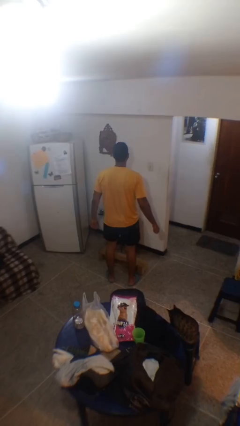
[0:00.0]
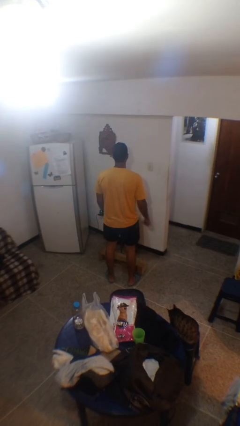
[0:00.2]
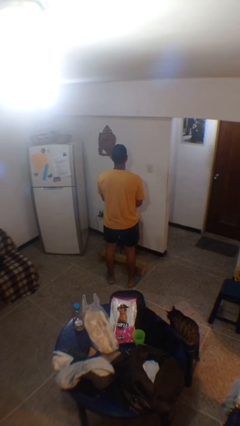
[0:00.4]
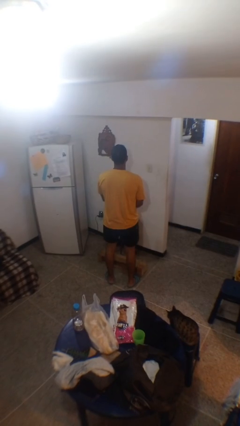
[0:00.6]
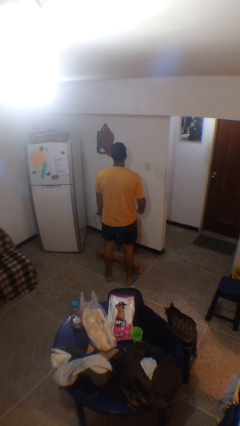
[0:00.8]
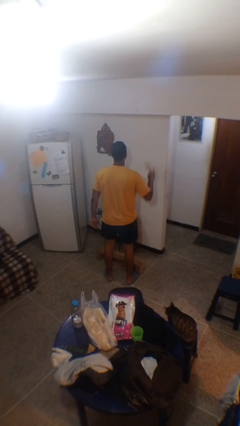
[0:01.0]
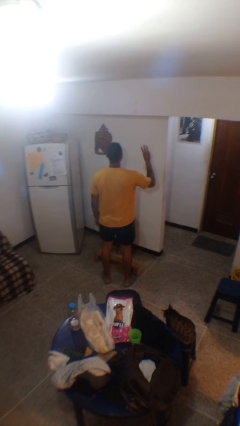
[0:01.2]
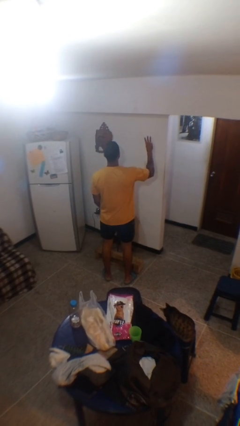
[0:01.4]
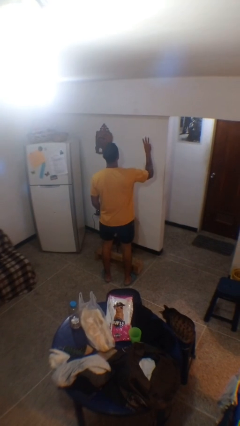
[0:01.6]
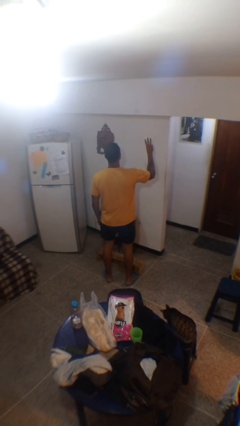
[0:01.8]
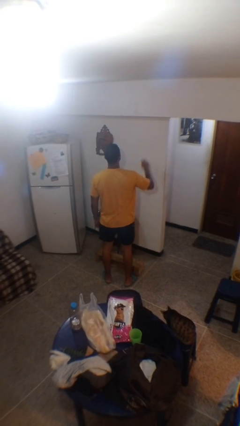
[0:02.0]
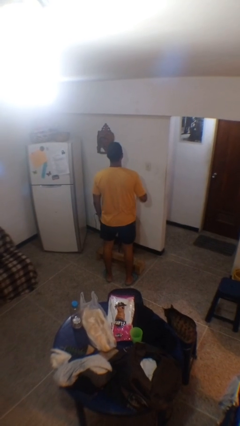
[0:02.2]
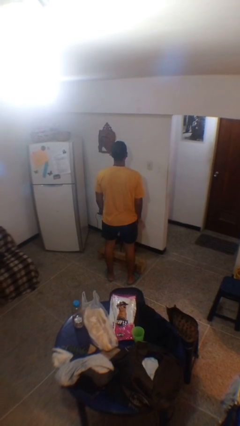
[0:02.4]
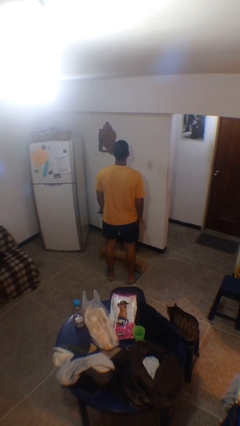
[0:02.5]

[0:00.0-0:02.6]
person gestures number three

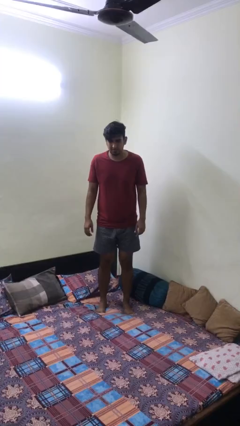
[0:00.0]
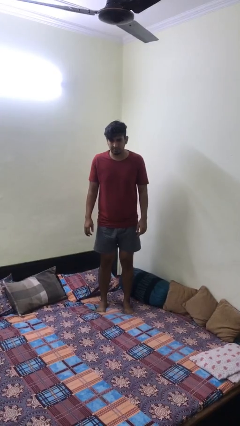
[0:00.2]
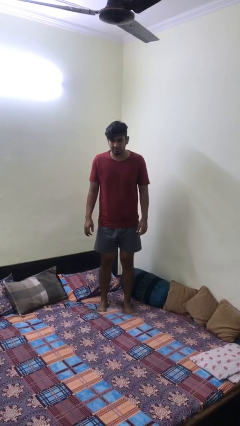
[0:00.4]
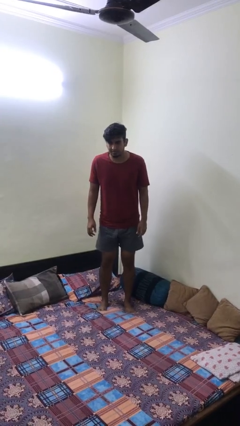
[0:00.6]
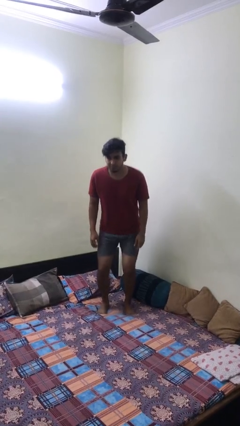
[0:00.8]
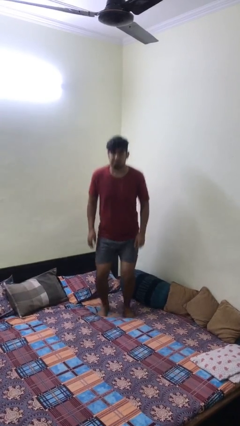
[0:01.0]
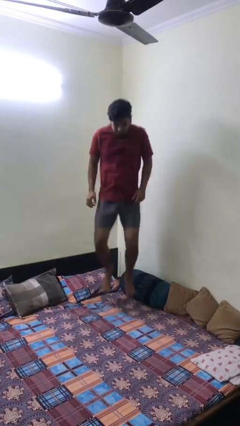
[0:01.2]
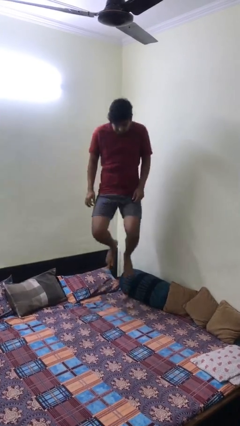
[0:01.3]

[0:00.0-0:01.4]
person jumps on bed

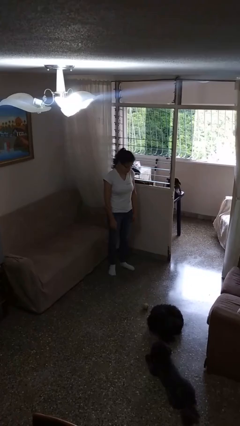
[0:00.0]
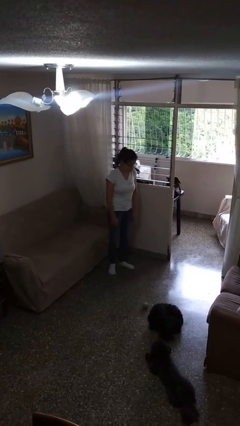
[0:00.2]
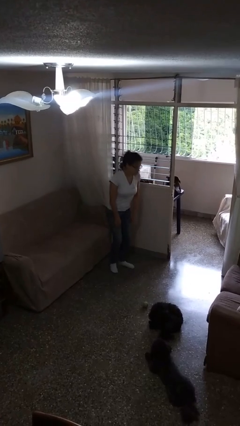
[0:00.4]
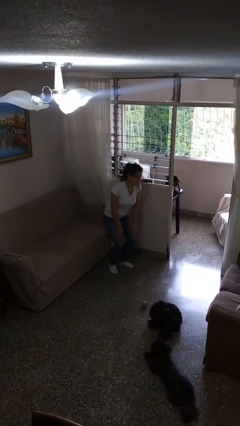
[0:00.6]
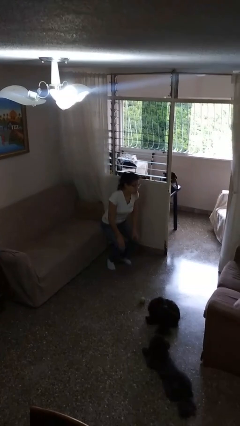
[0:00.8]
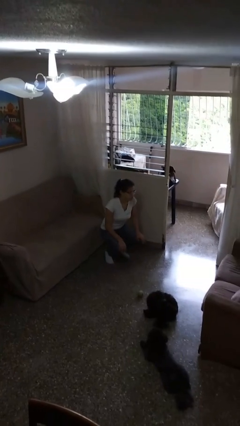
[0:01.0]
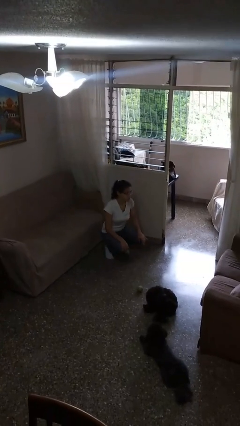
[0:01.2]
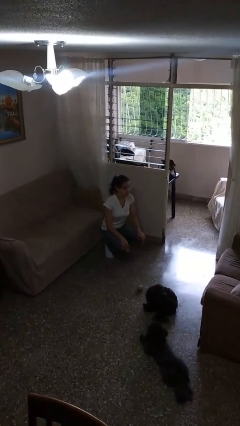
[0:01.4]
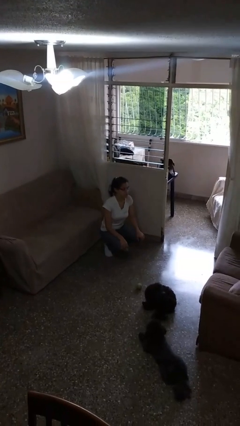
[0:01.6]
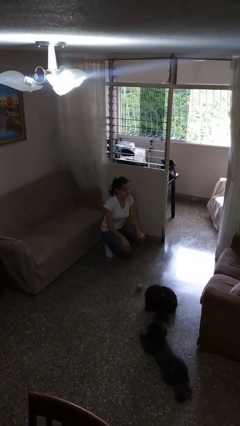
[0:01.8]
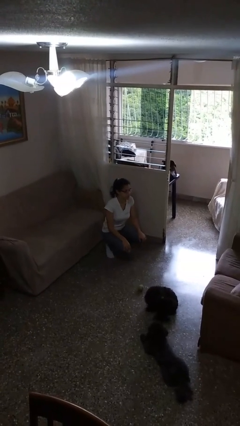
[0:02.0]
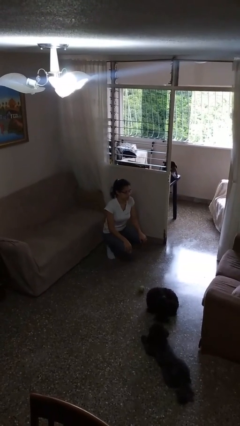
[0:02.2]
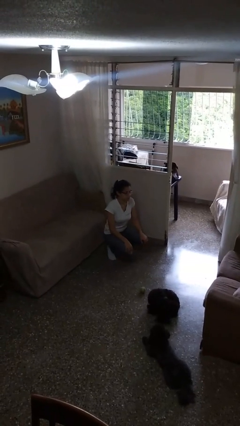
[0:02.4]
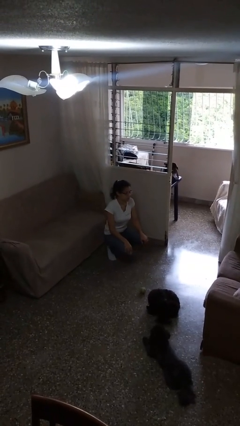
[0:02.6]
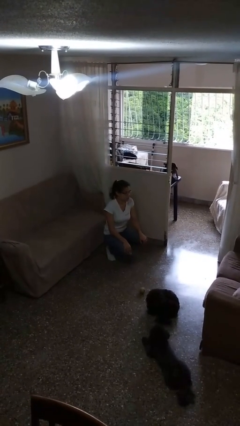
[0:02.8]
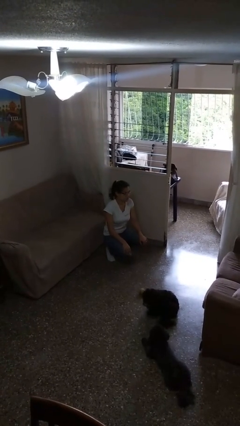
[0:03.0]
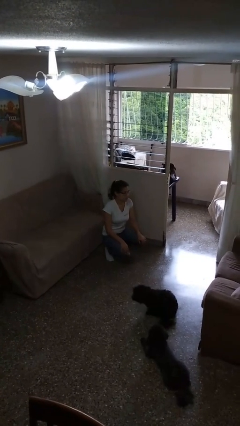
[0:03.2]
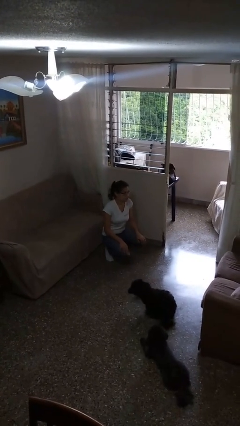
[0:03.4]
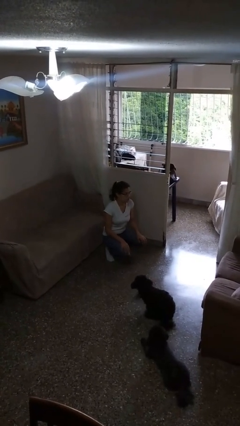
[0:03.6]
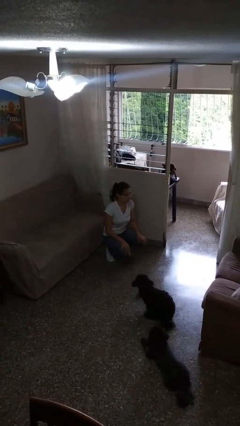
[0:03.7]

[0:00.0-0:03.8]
person squats

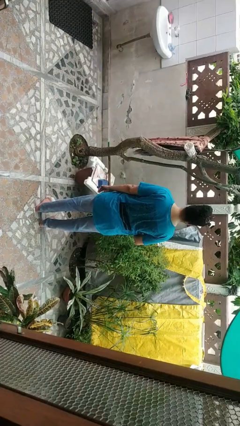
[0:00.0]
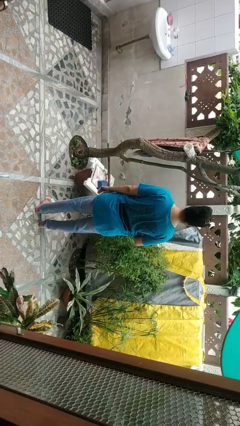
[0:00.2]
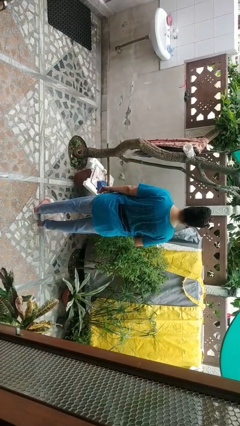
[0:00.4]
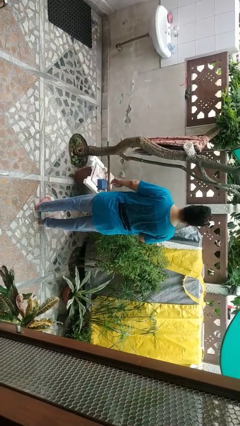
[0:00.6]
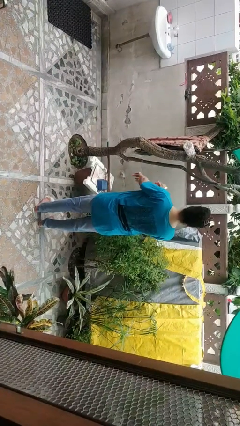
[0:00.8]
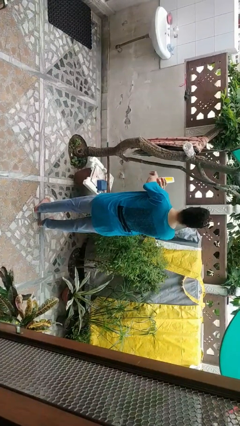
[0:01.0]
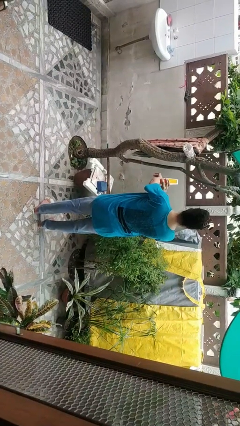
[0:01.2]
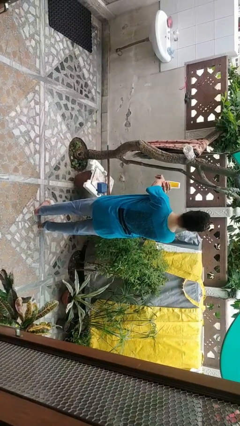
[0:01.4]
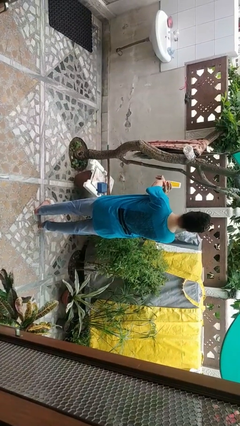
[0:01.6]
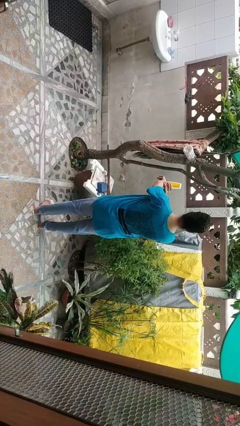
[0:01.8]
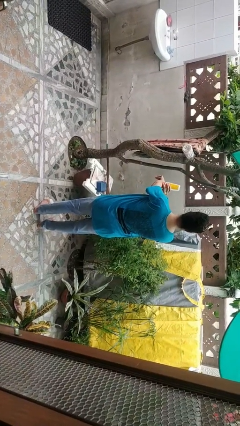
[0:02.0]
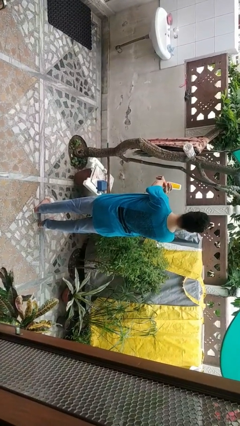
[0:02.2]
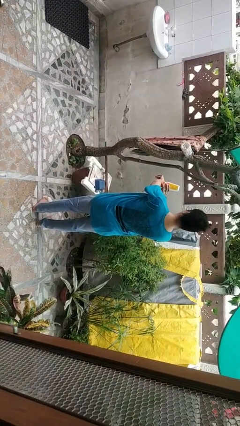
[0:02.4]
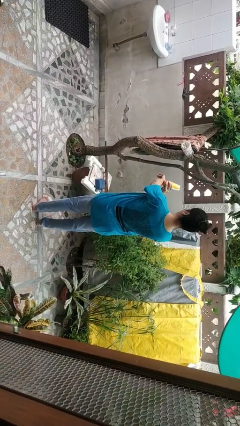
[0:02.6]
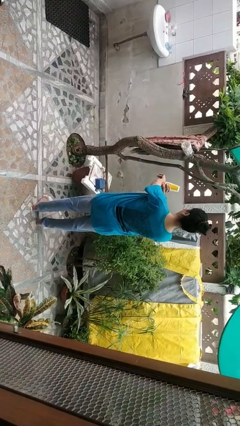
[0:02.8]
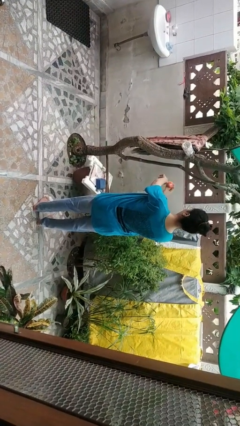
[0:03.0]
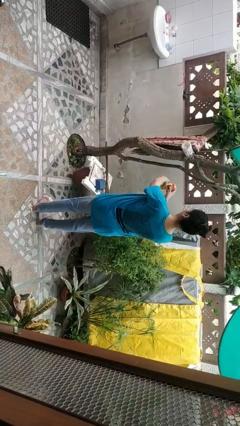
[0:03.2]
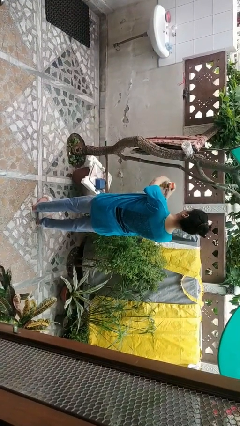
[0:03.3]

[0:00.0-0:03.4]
person applies sunscreen

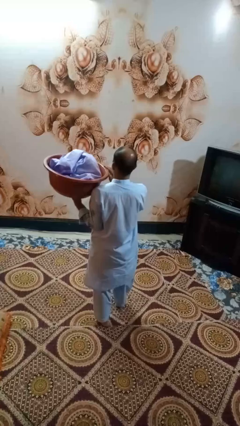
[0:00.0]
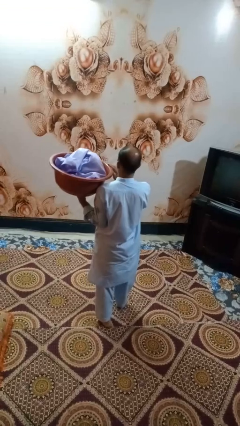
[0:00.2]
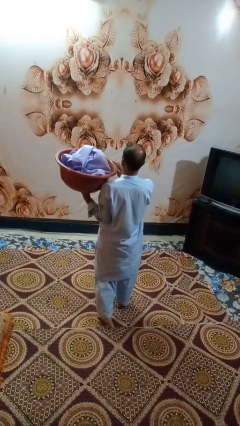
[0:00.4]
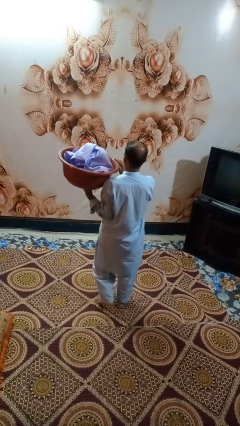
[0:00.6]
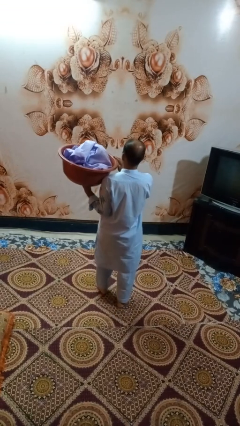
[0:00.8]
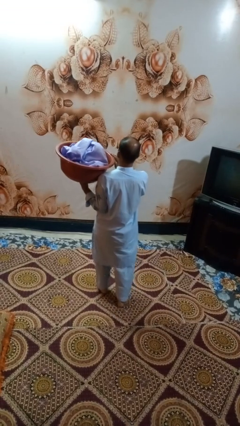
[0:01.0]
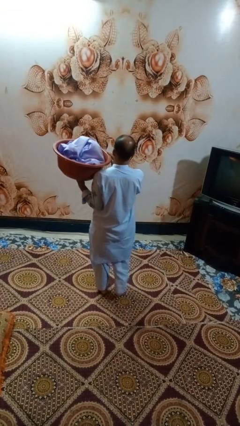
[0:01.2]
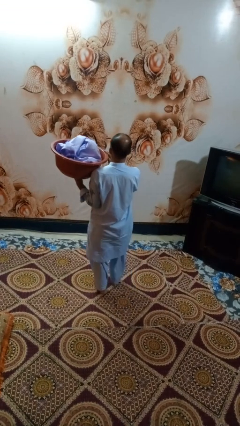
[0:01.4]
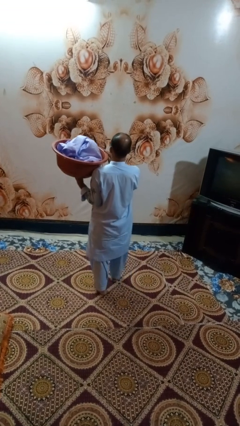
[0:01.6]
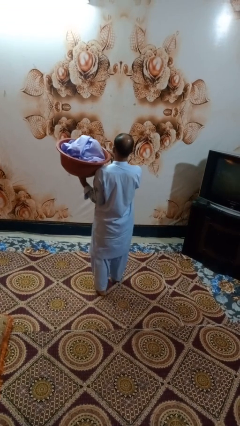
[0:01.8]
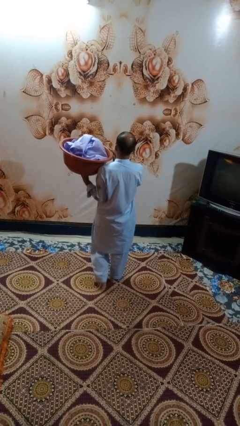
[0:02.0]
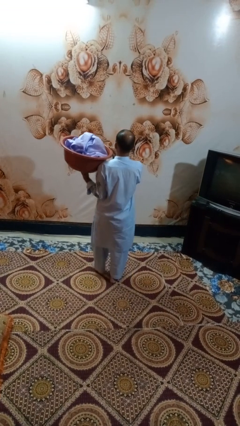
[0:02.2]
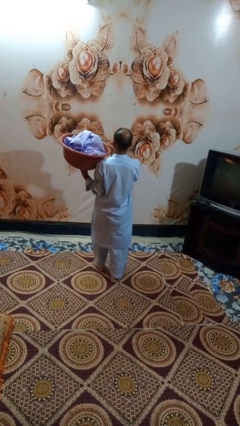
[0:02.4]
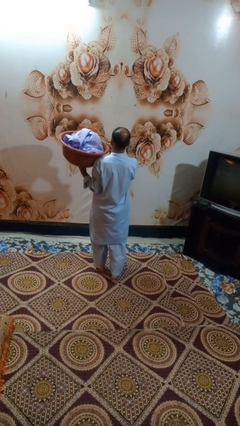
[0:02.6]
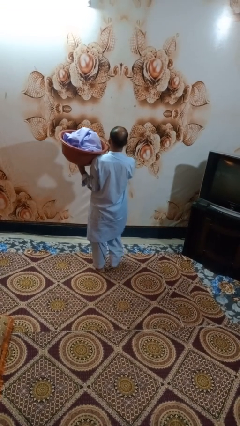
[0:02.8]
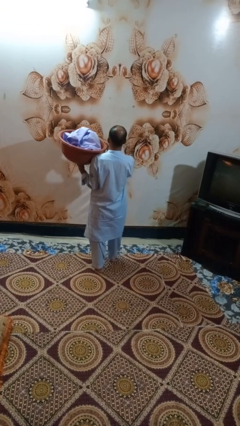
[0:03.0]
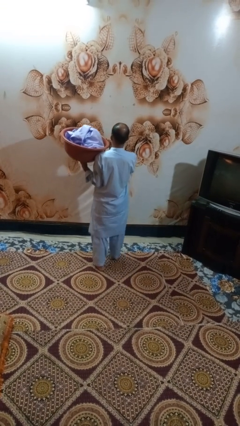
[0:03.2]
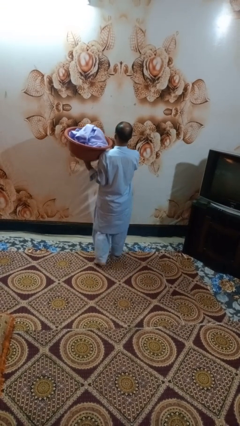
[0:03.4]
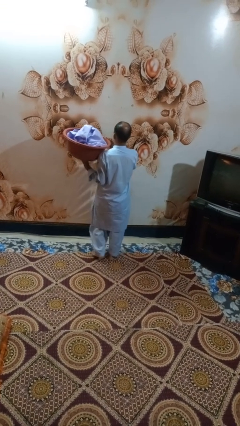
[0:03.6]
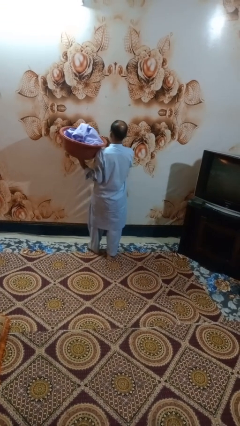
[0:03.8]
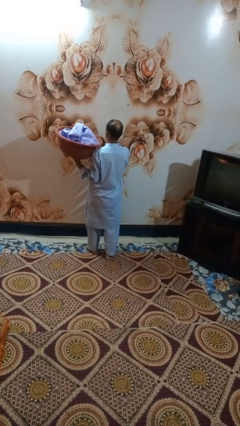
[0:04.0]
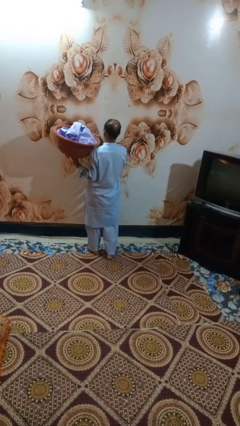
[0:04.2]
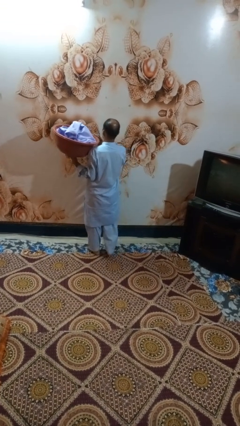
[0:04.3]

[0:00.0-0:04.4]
person carries laundry basket

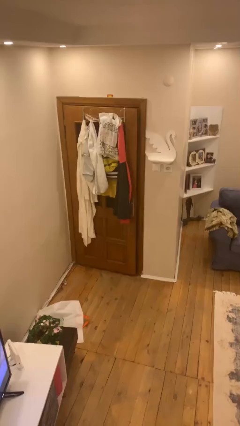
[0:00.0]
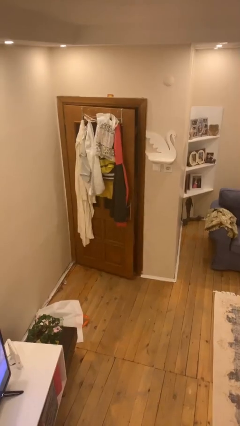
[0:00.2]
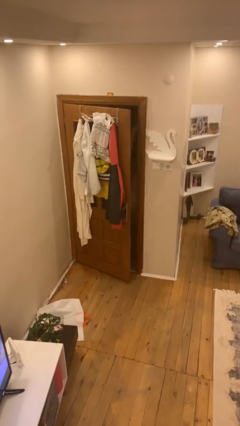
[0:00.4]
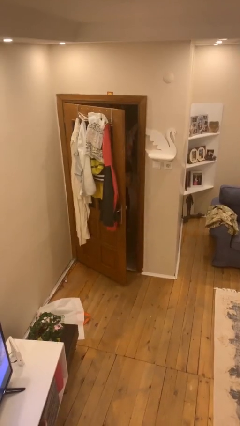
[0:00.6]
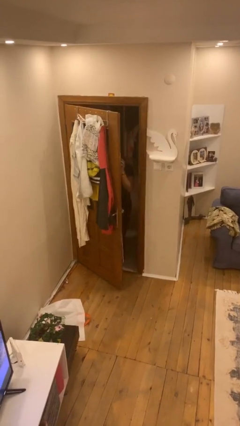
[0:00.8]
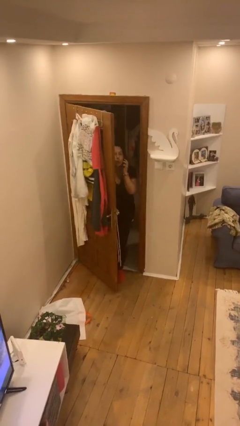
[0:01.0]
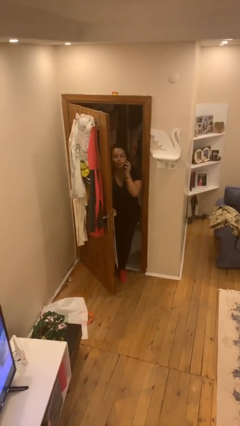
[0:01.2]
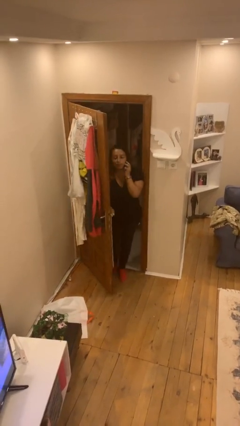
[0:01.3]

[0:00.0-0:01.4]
person opens facility door

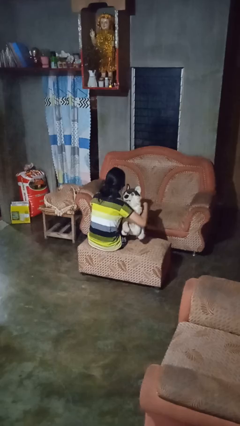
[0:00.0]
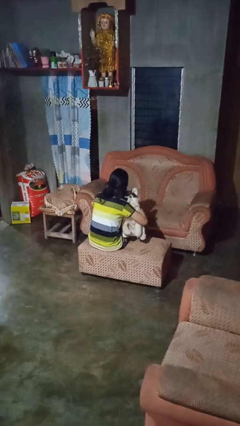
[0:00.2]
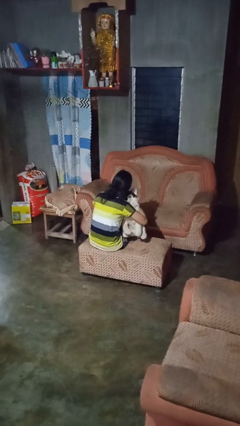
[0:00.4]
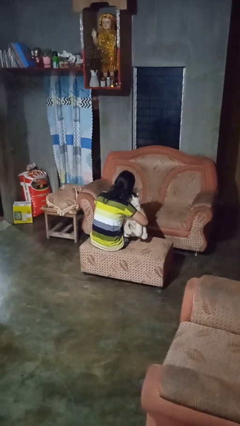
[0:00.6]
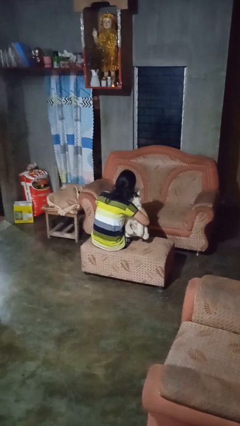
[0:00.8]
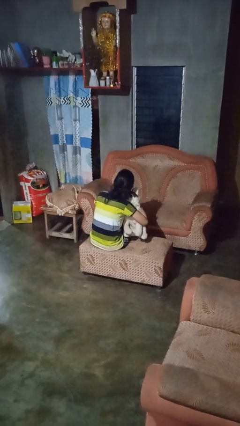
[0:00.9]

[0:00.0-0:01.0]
person hugs stuffed animal
